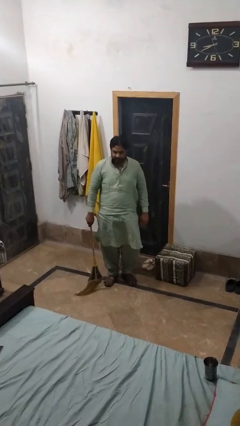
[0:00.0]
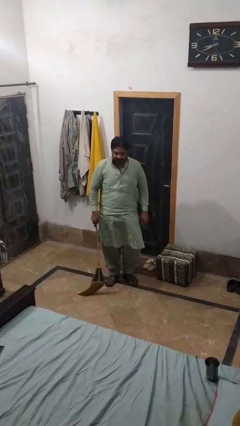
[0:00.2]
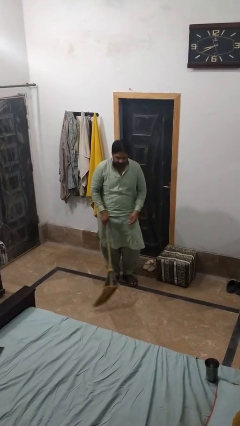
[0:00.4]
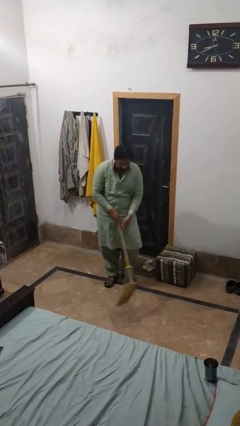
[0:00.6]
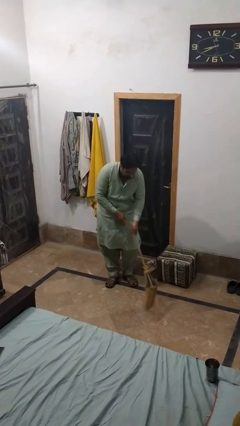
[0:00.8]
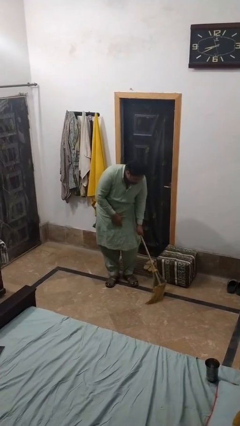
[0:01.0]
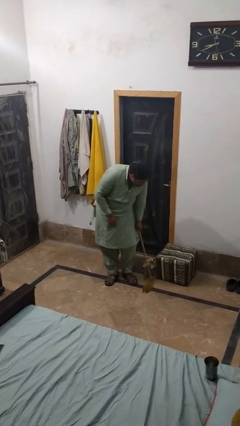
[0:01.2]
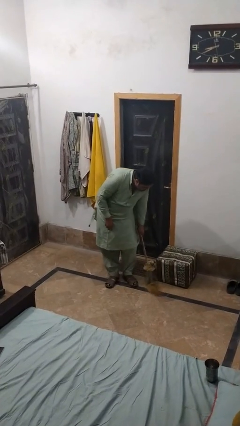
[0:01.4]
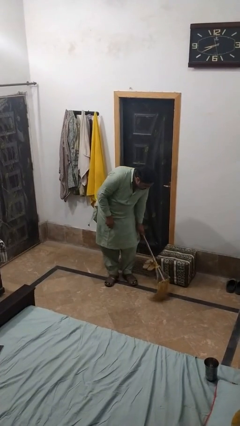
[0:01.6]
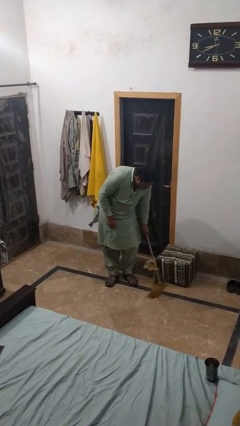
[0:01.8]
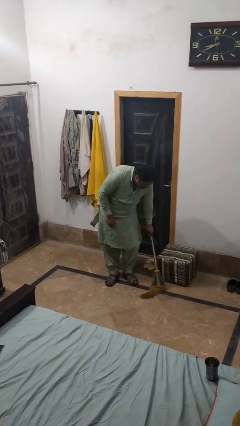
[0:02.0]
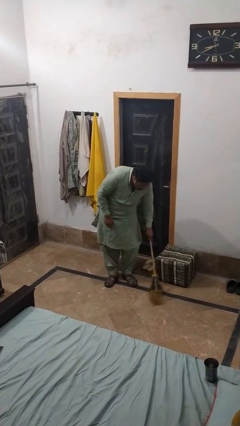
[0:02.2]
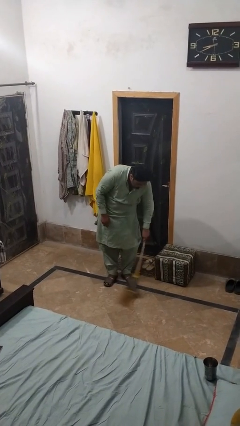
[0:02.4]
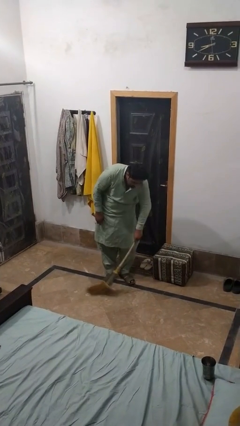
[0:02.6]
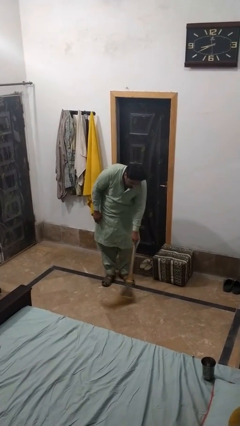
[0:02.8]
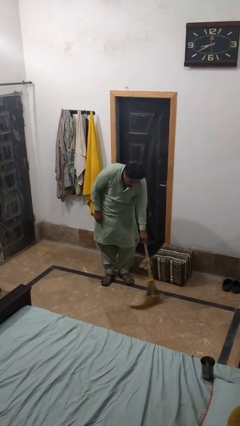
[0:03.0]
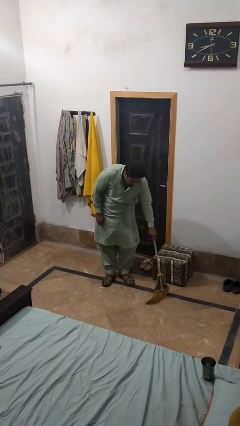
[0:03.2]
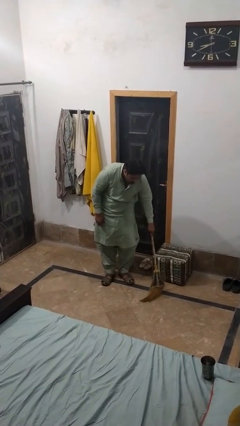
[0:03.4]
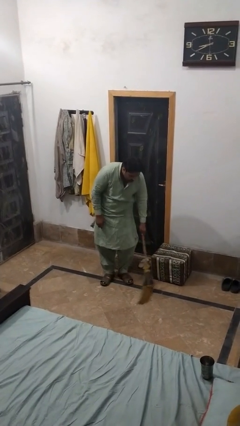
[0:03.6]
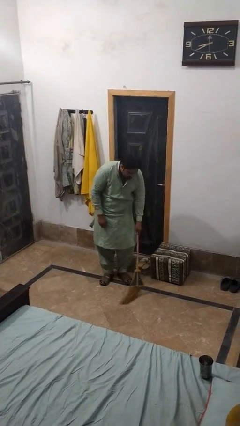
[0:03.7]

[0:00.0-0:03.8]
person mops

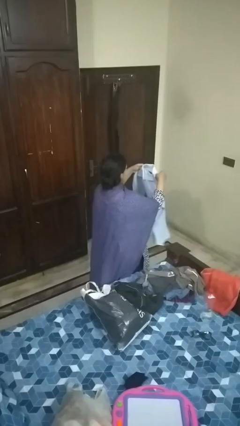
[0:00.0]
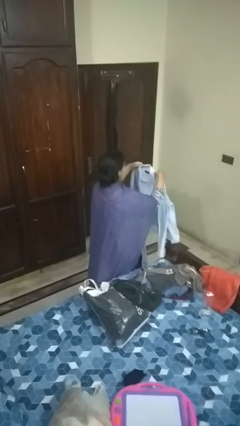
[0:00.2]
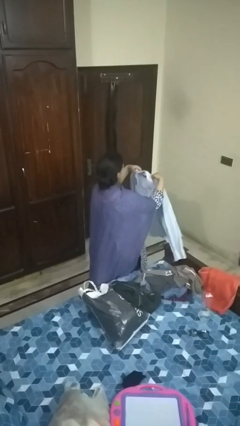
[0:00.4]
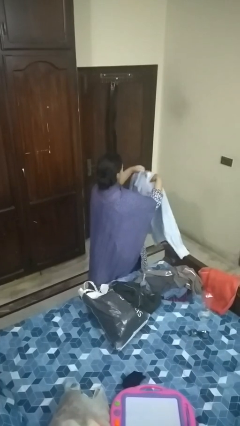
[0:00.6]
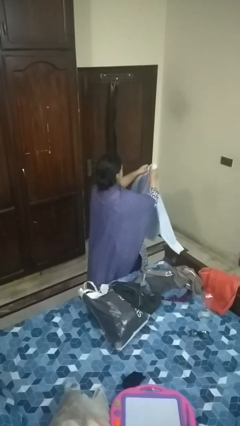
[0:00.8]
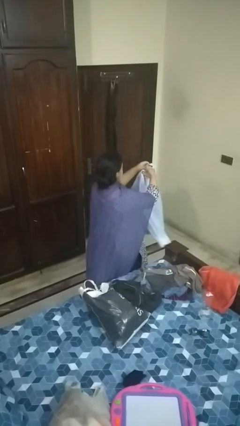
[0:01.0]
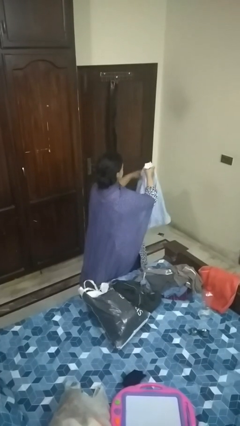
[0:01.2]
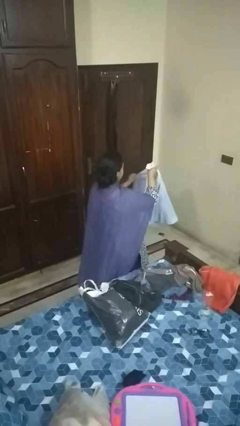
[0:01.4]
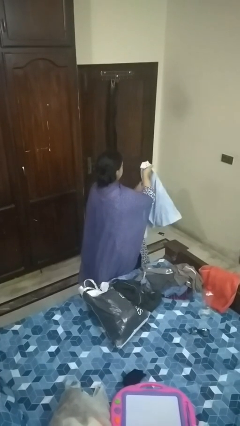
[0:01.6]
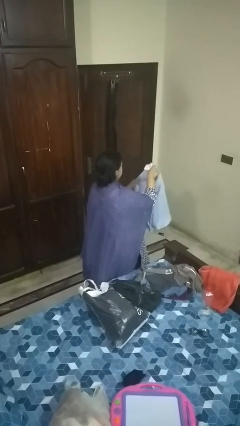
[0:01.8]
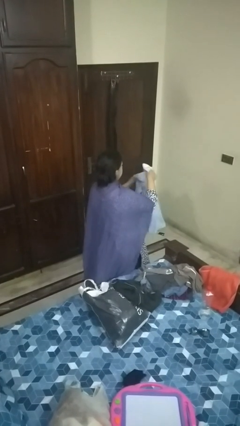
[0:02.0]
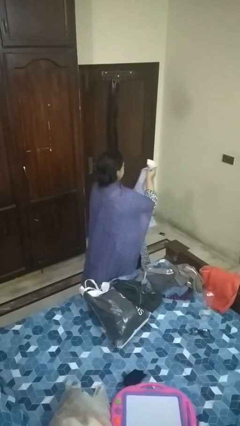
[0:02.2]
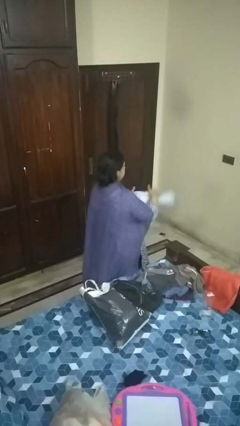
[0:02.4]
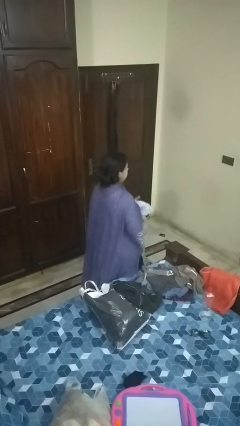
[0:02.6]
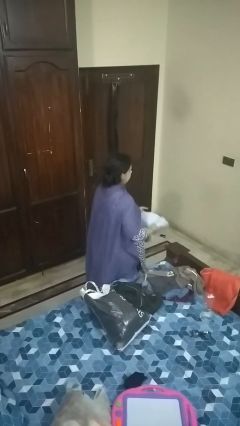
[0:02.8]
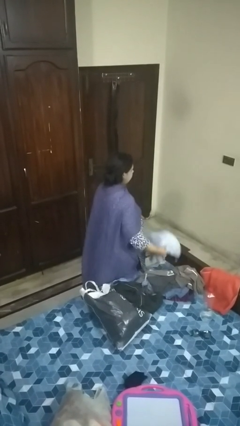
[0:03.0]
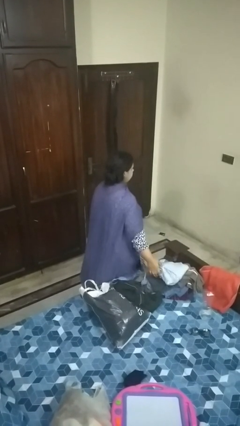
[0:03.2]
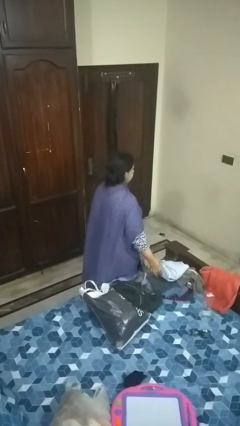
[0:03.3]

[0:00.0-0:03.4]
person folds shirt

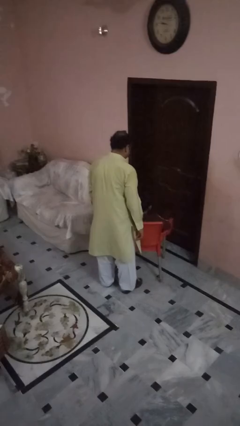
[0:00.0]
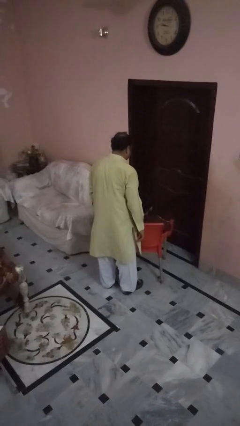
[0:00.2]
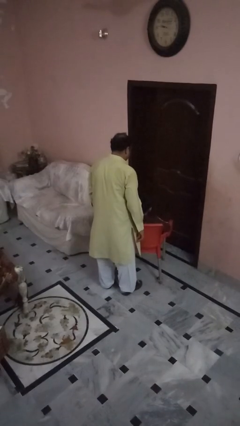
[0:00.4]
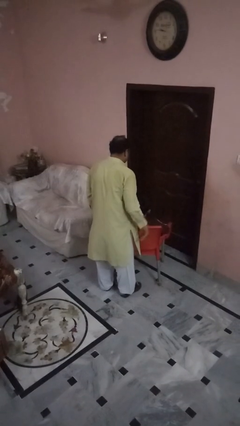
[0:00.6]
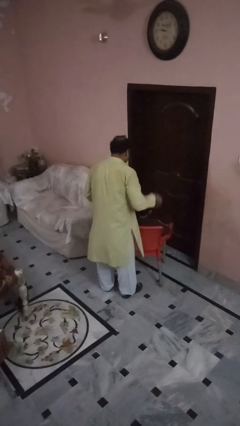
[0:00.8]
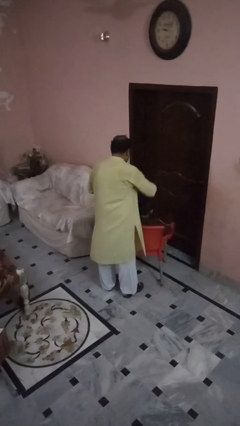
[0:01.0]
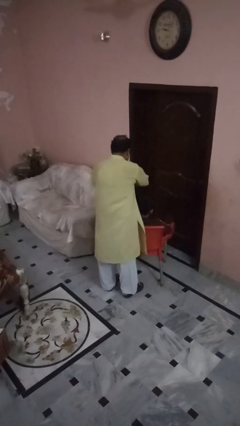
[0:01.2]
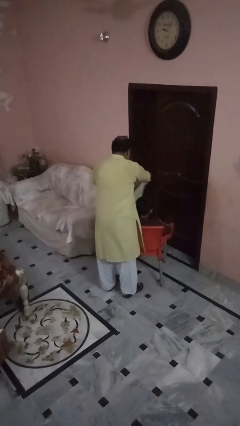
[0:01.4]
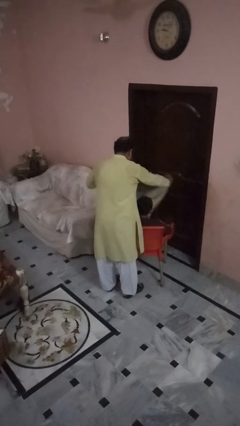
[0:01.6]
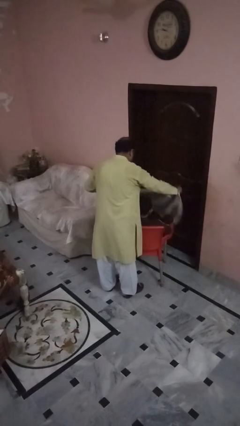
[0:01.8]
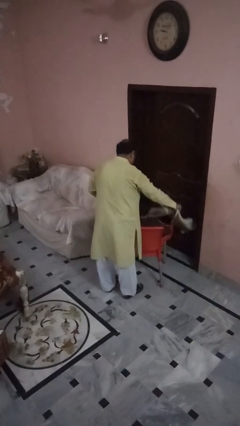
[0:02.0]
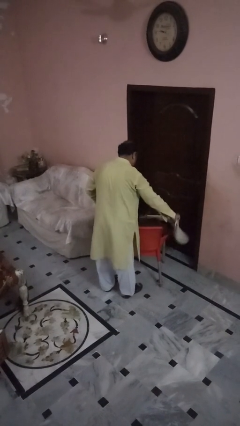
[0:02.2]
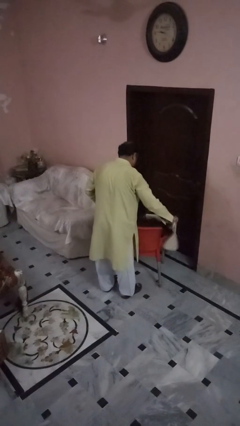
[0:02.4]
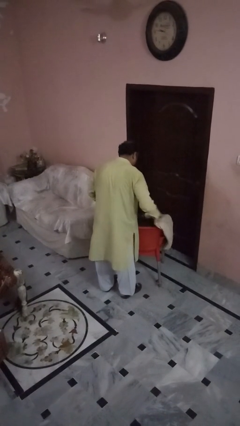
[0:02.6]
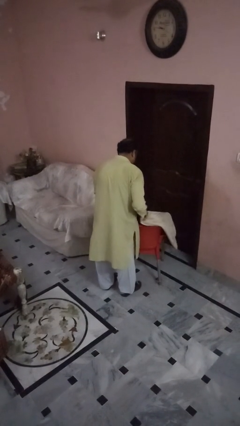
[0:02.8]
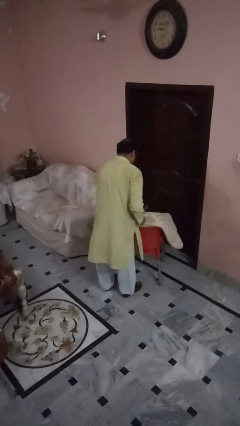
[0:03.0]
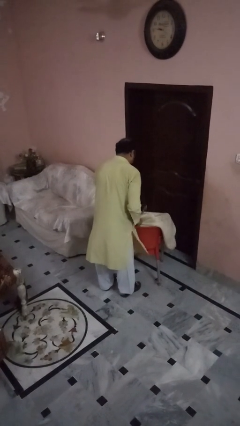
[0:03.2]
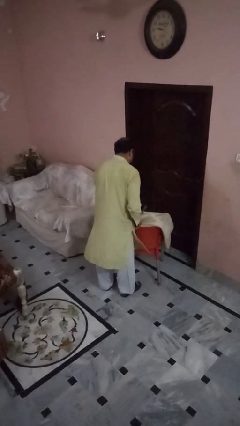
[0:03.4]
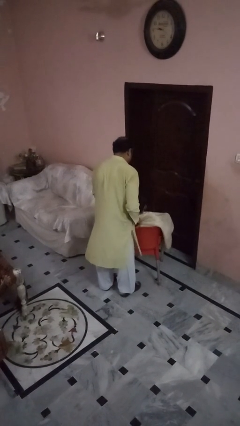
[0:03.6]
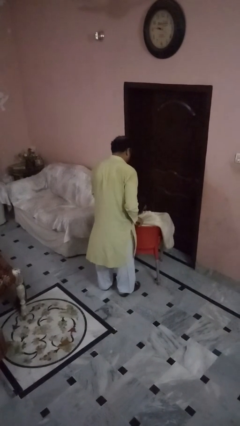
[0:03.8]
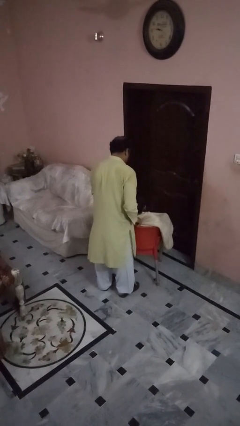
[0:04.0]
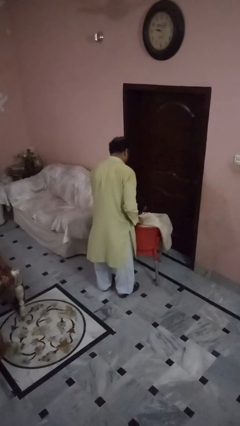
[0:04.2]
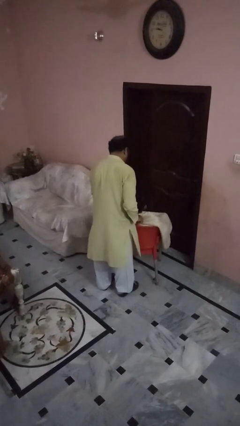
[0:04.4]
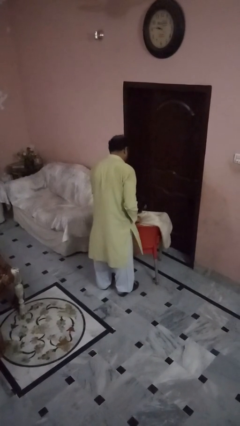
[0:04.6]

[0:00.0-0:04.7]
person covers friend with blanket

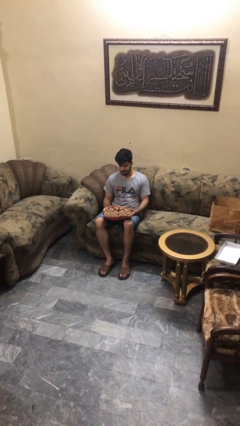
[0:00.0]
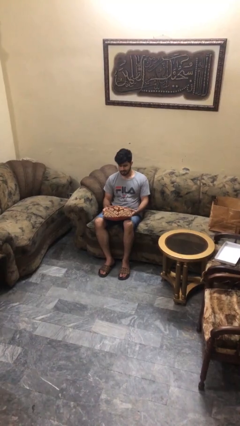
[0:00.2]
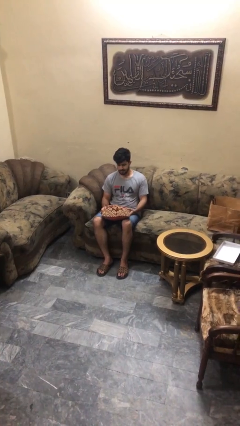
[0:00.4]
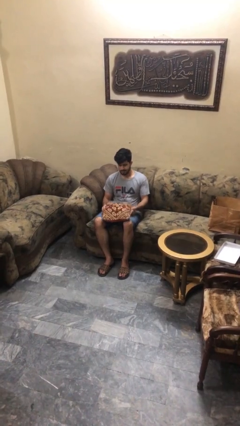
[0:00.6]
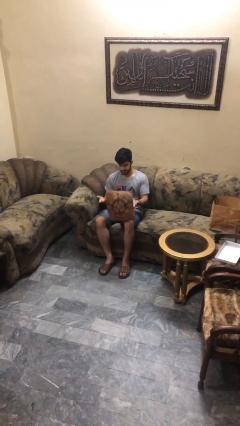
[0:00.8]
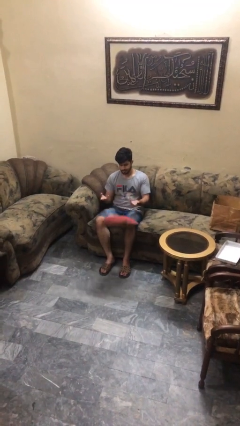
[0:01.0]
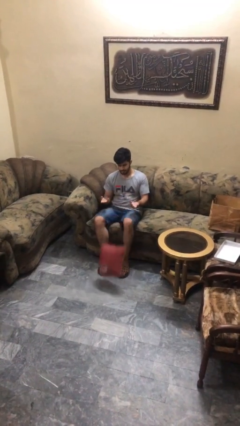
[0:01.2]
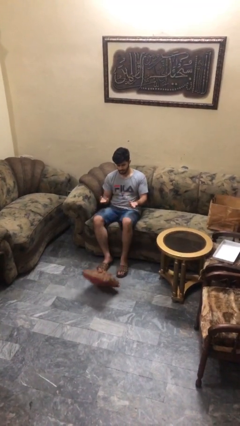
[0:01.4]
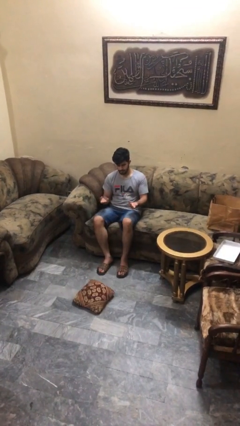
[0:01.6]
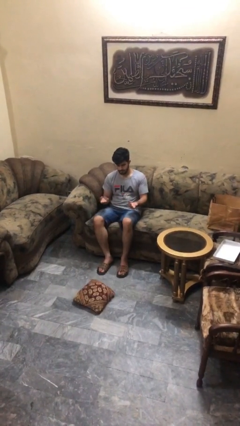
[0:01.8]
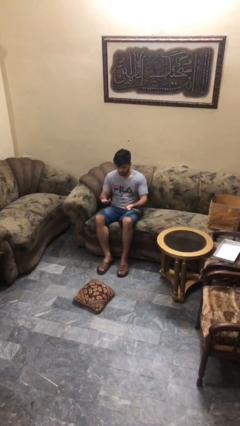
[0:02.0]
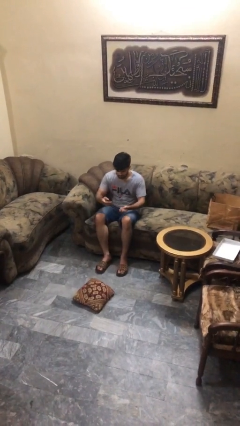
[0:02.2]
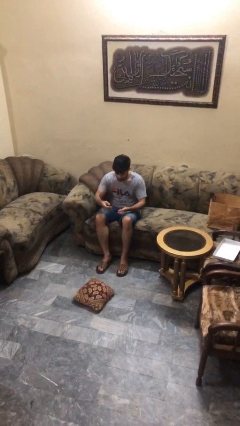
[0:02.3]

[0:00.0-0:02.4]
person drops object

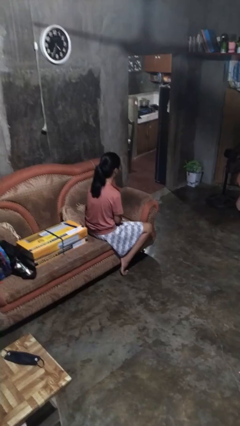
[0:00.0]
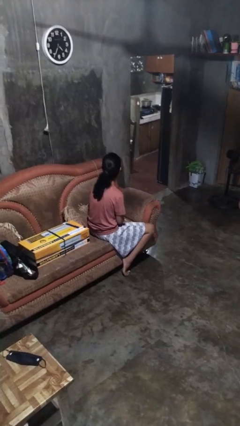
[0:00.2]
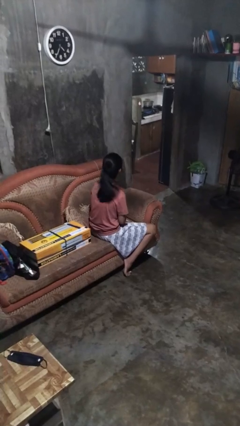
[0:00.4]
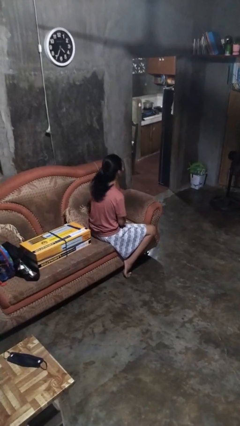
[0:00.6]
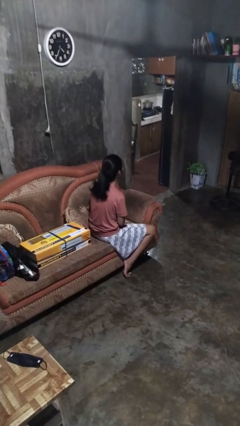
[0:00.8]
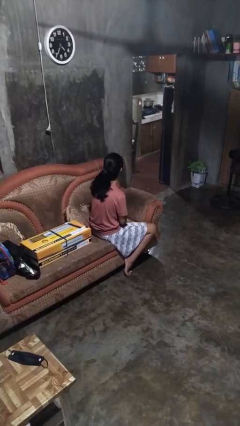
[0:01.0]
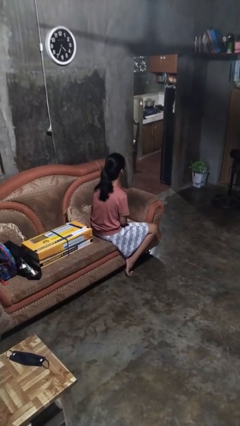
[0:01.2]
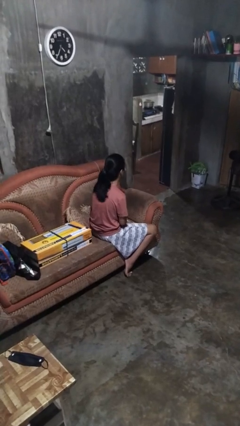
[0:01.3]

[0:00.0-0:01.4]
person shakes head

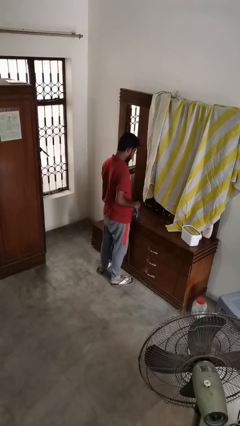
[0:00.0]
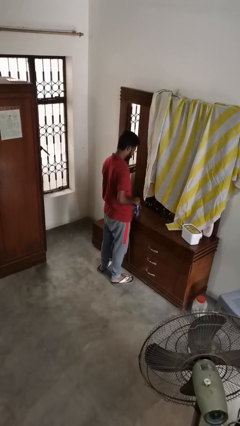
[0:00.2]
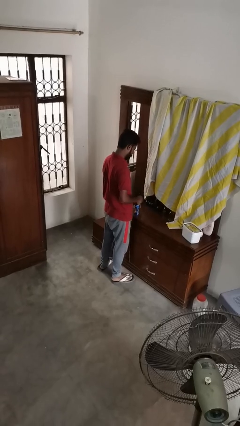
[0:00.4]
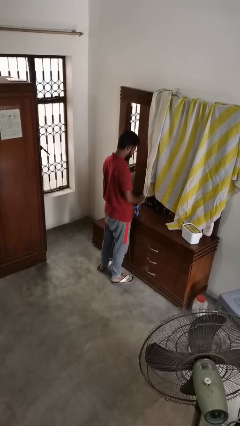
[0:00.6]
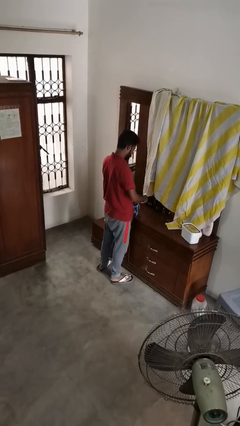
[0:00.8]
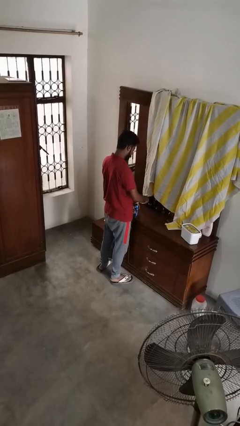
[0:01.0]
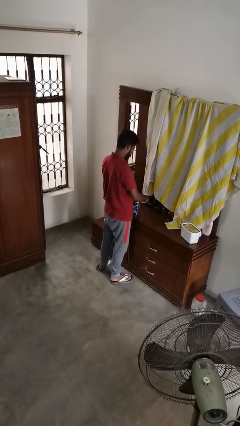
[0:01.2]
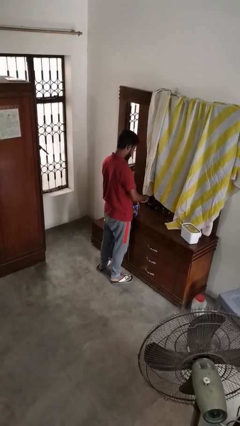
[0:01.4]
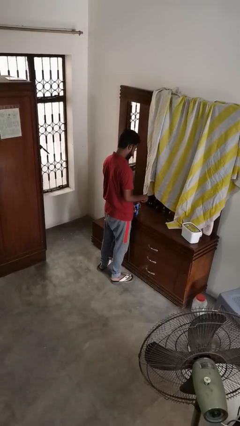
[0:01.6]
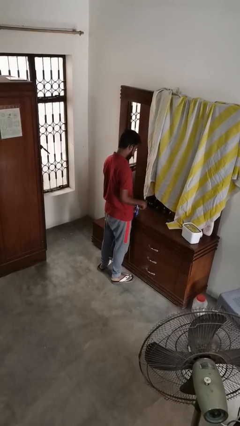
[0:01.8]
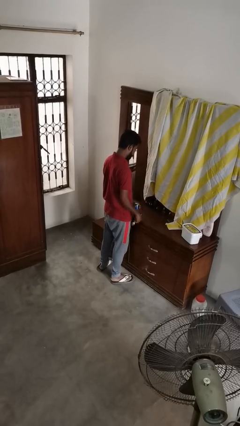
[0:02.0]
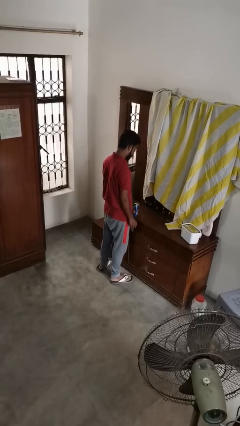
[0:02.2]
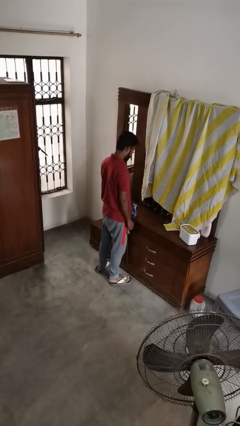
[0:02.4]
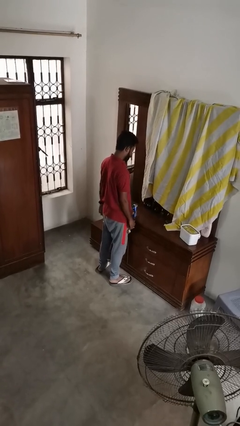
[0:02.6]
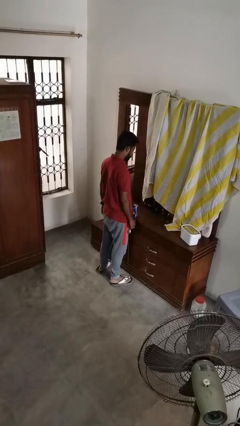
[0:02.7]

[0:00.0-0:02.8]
person opens can with can opener
